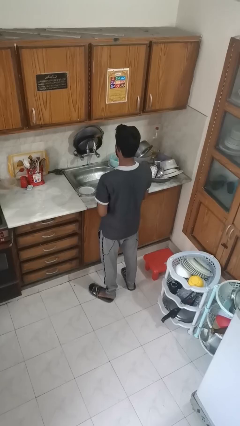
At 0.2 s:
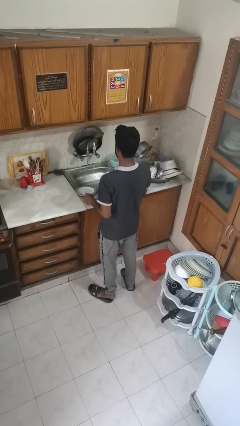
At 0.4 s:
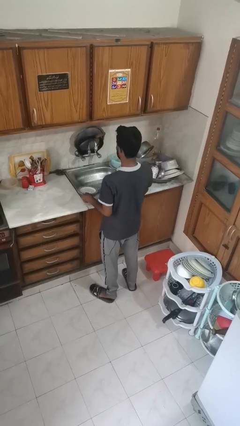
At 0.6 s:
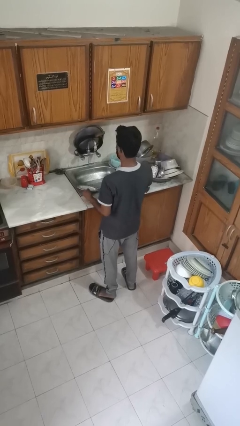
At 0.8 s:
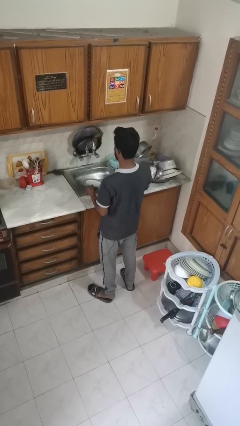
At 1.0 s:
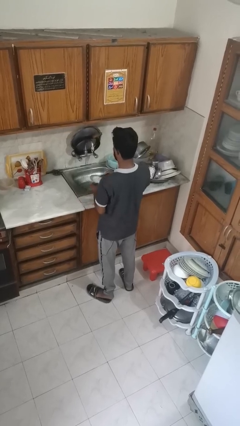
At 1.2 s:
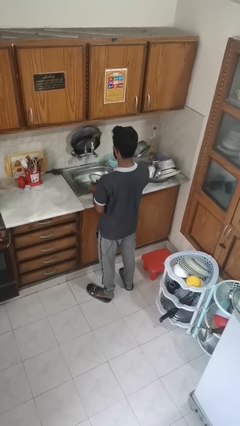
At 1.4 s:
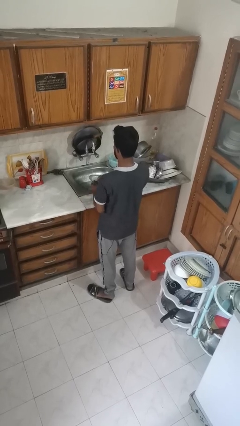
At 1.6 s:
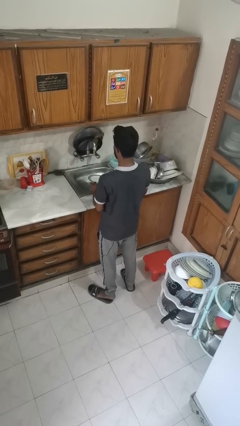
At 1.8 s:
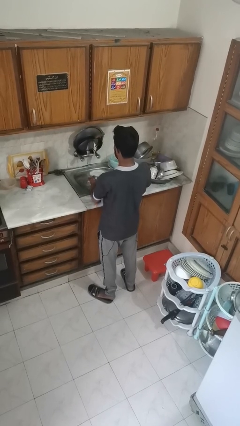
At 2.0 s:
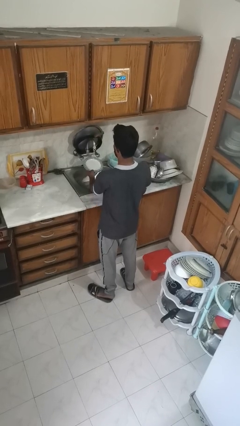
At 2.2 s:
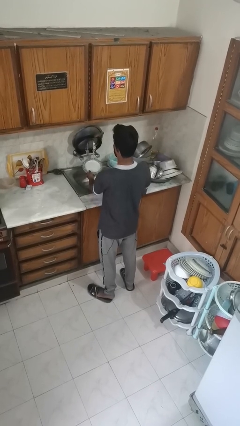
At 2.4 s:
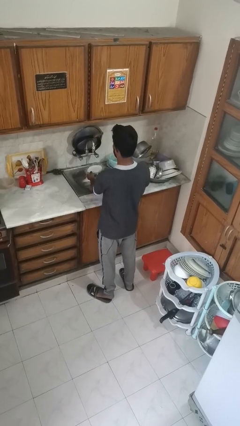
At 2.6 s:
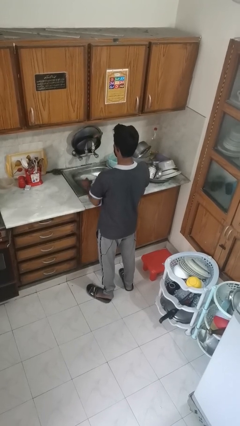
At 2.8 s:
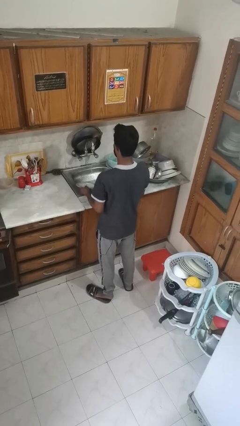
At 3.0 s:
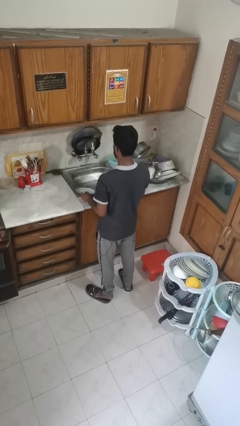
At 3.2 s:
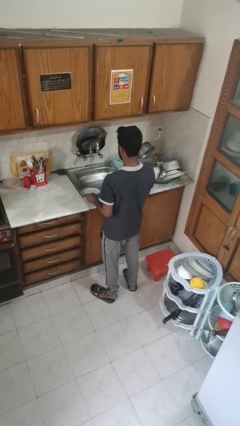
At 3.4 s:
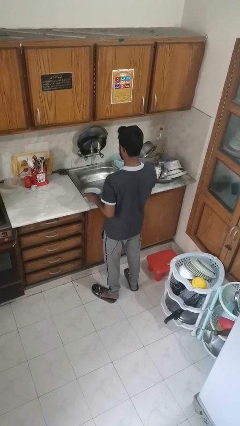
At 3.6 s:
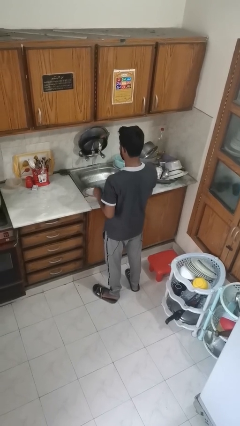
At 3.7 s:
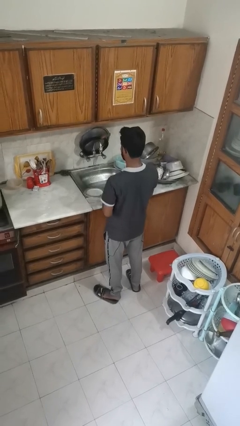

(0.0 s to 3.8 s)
person washes dish

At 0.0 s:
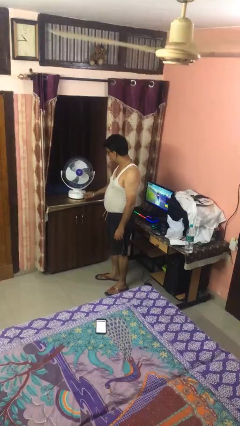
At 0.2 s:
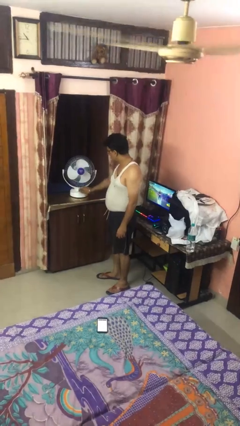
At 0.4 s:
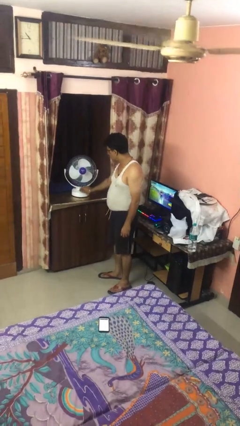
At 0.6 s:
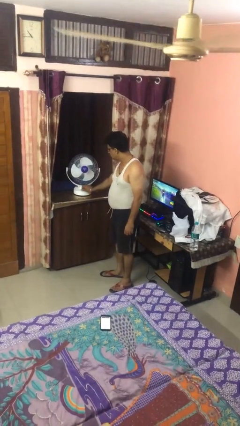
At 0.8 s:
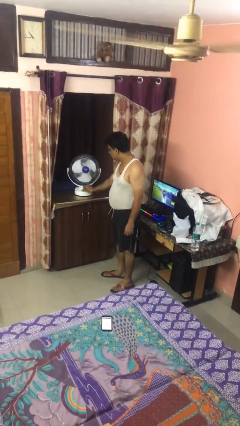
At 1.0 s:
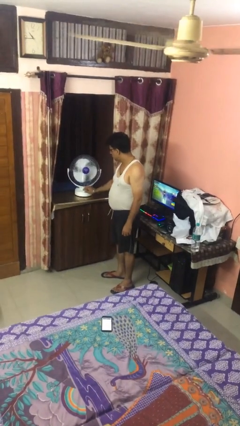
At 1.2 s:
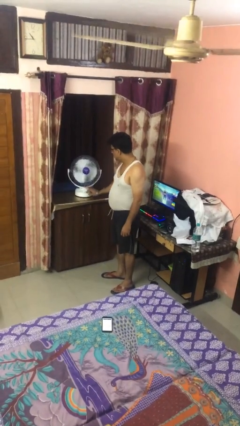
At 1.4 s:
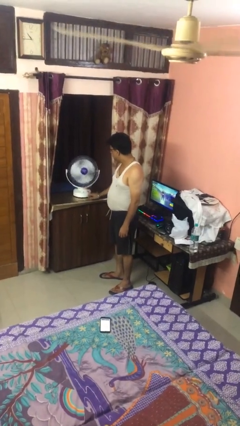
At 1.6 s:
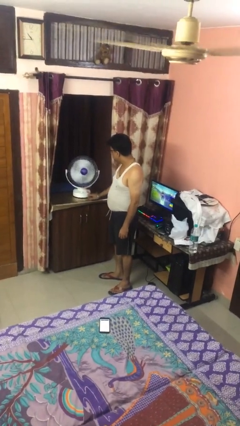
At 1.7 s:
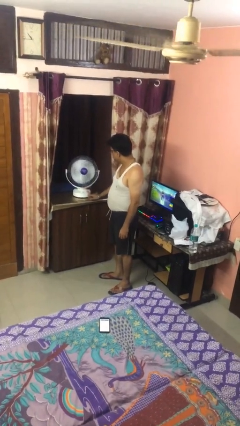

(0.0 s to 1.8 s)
person turns on fan

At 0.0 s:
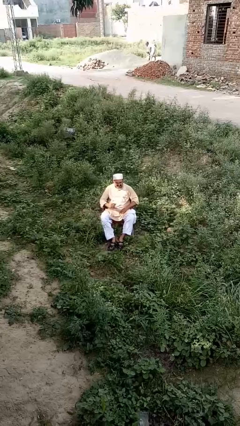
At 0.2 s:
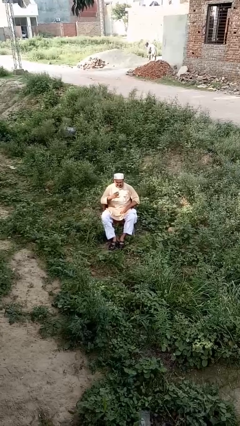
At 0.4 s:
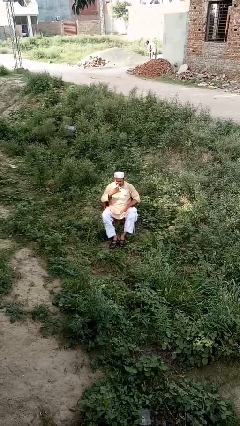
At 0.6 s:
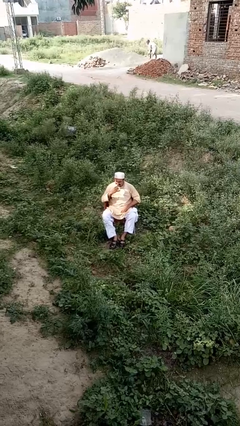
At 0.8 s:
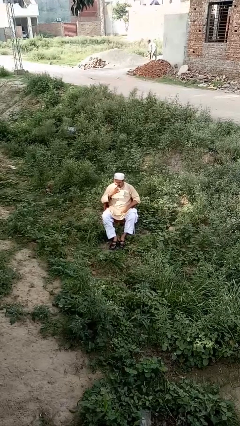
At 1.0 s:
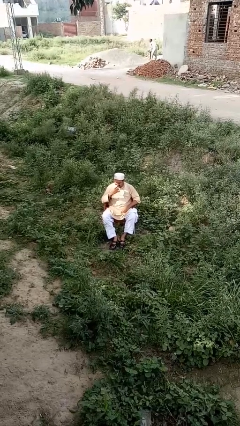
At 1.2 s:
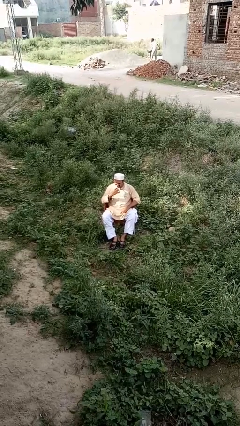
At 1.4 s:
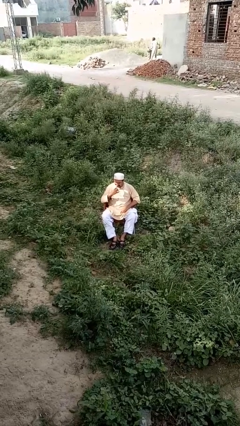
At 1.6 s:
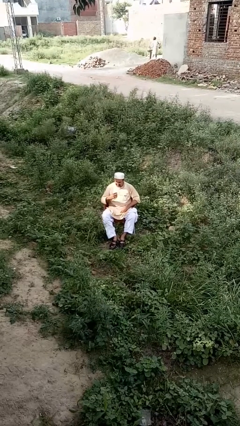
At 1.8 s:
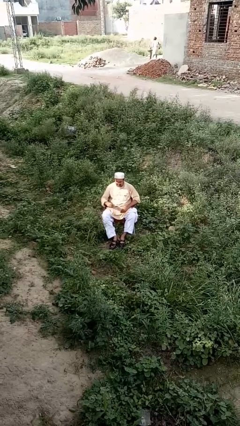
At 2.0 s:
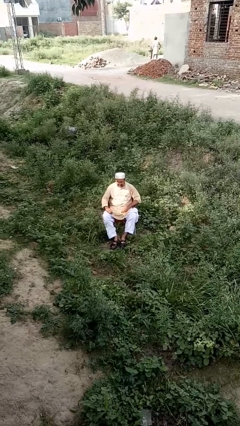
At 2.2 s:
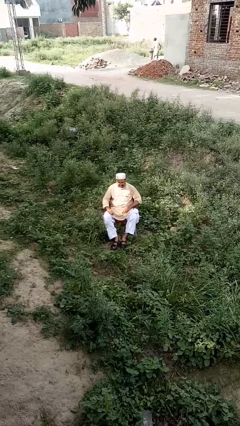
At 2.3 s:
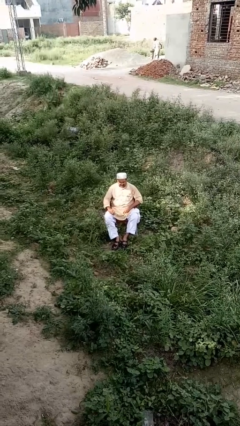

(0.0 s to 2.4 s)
person brushes teeth

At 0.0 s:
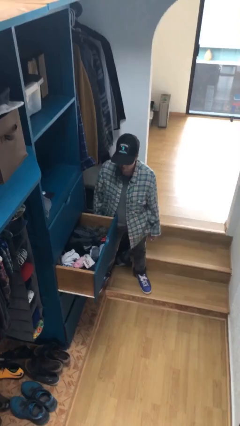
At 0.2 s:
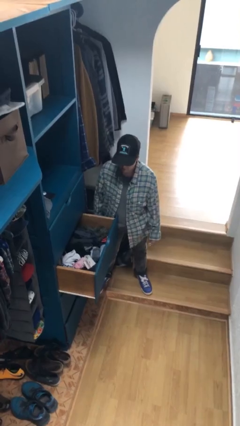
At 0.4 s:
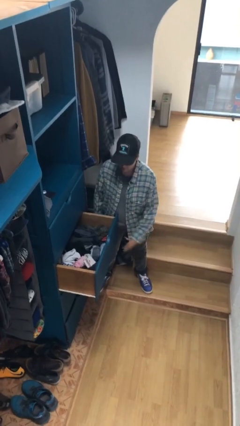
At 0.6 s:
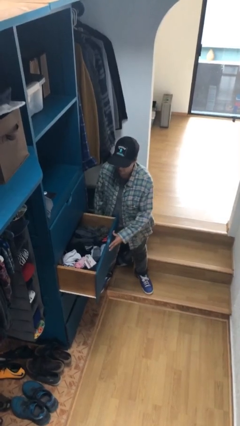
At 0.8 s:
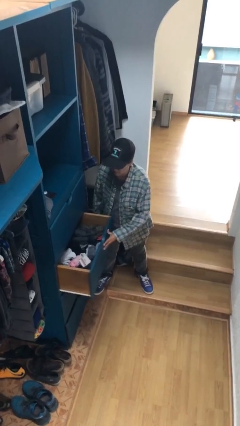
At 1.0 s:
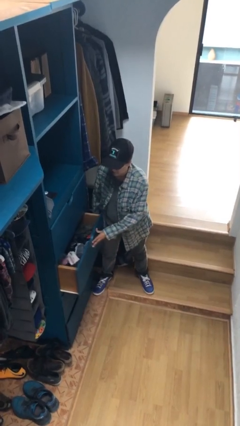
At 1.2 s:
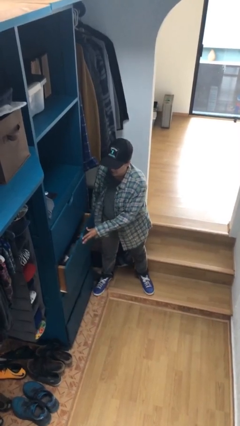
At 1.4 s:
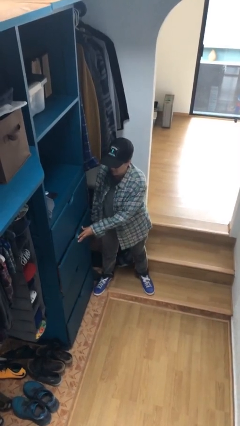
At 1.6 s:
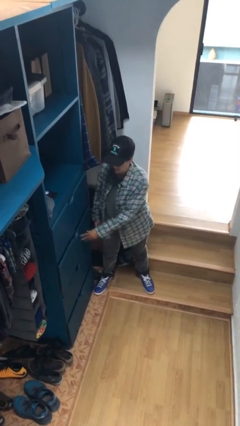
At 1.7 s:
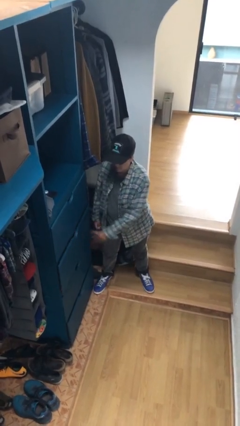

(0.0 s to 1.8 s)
person closes dresser drawer

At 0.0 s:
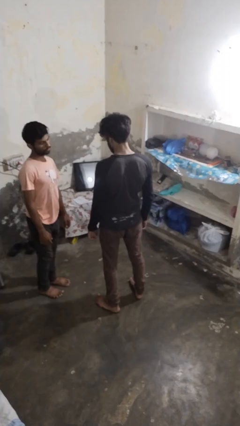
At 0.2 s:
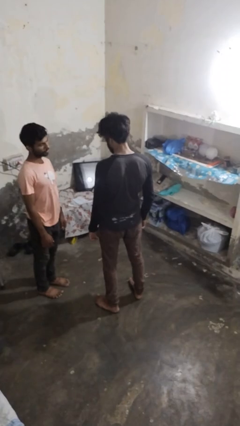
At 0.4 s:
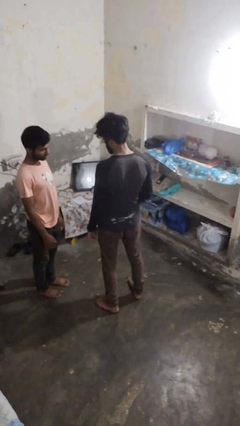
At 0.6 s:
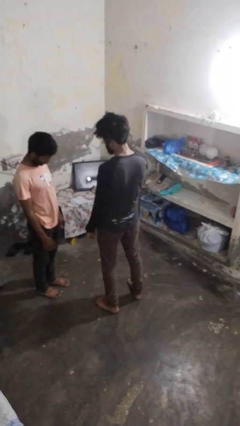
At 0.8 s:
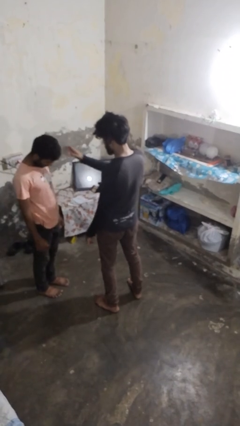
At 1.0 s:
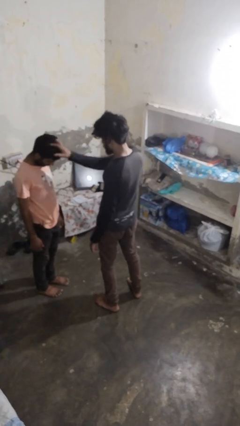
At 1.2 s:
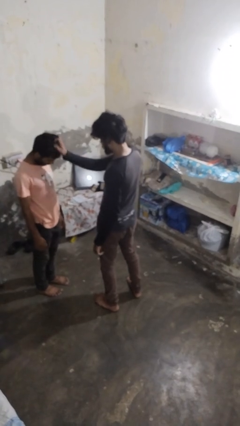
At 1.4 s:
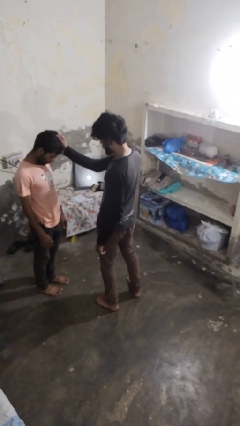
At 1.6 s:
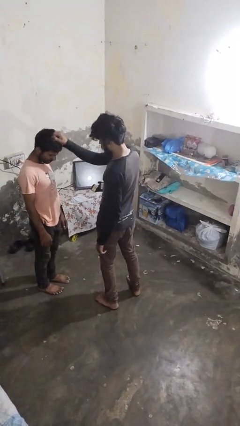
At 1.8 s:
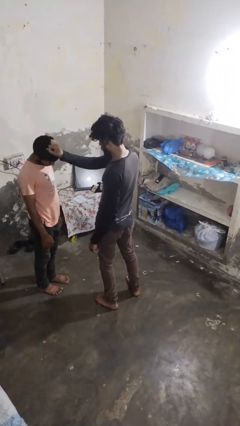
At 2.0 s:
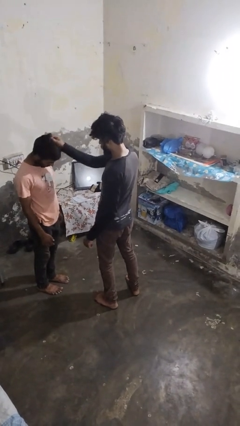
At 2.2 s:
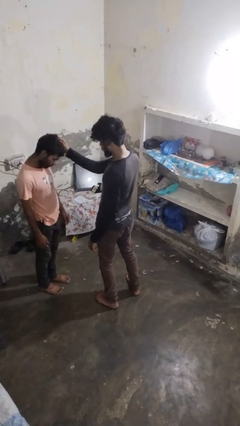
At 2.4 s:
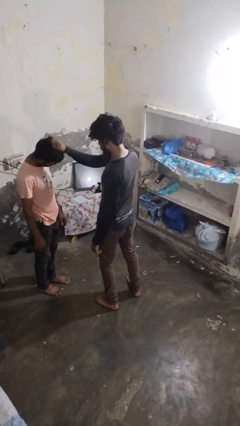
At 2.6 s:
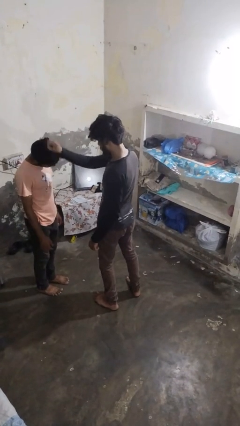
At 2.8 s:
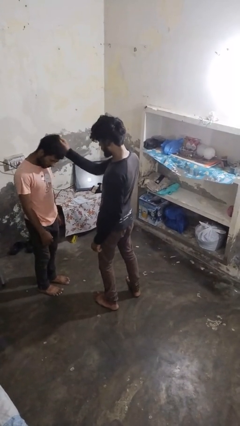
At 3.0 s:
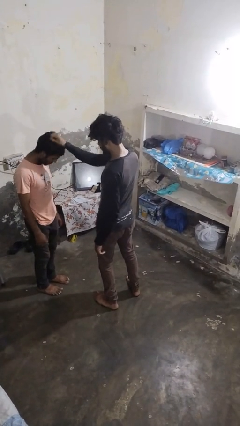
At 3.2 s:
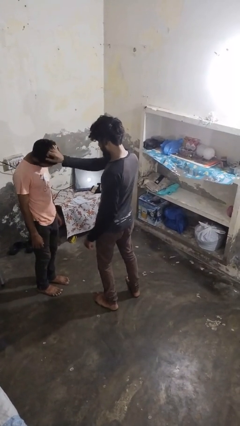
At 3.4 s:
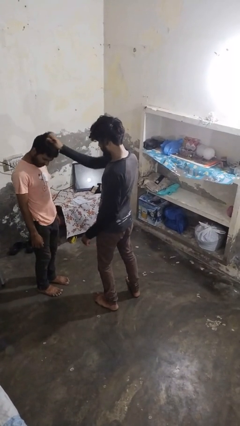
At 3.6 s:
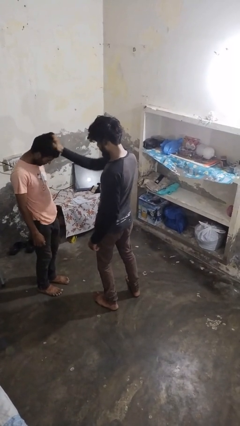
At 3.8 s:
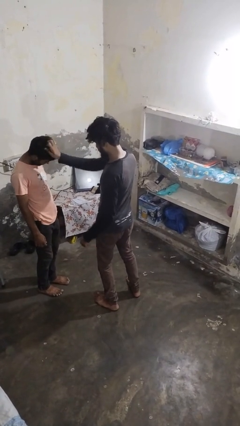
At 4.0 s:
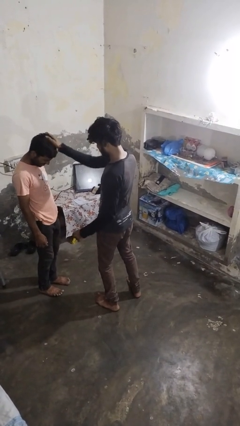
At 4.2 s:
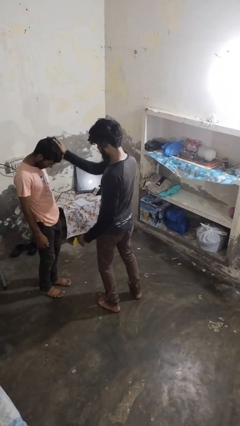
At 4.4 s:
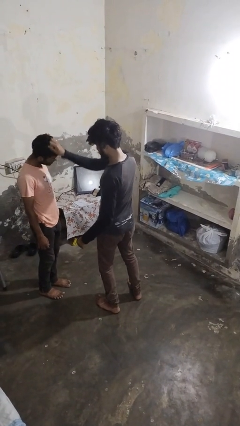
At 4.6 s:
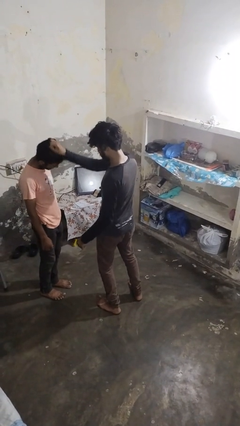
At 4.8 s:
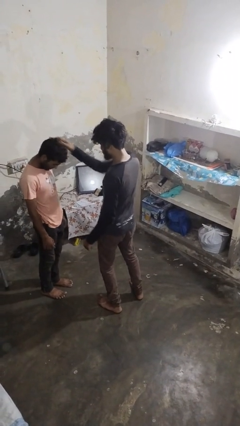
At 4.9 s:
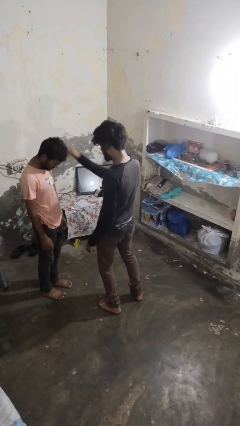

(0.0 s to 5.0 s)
person grabs person by hair

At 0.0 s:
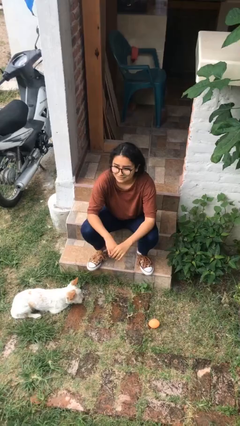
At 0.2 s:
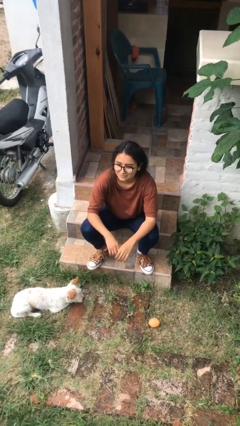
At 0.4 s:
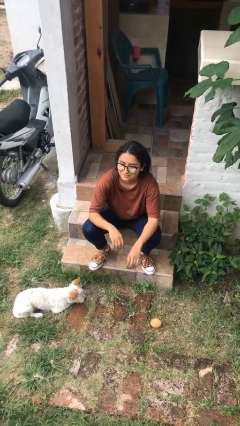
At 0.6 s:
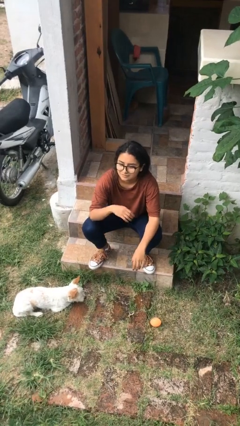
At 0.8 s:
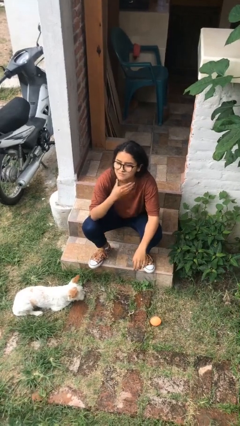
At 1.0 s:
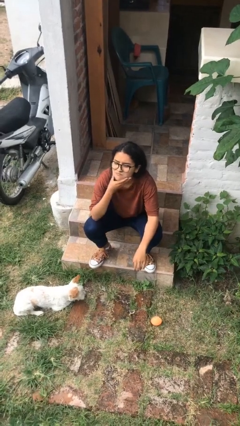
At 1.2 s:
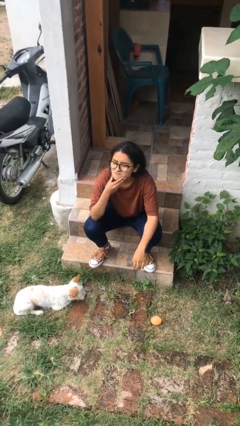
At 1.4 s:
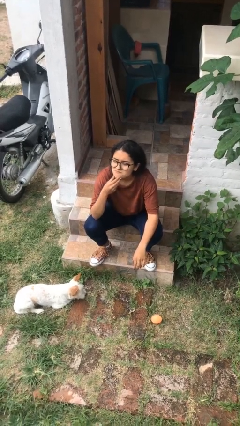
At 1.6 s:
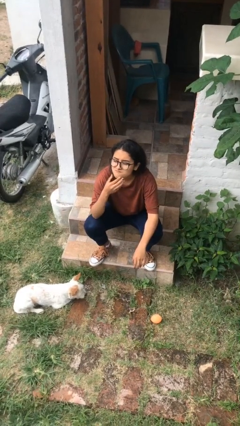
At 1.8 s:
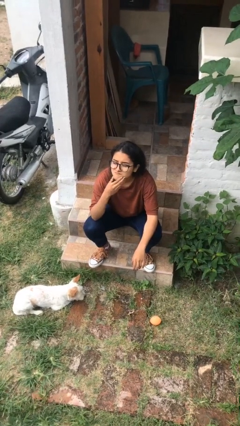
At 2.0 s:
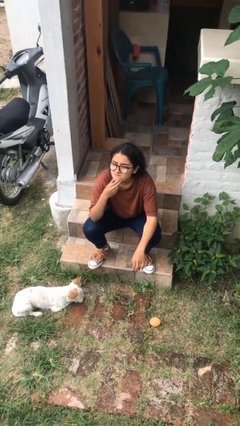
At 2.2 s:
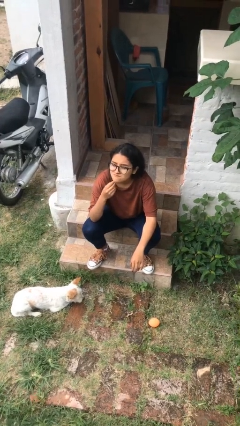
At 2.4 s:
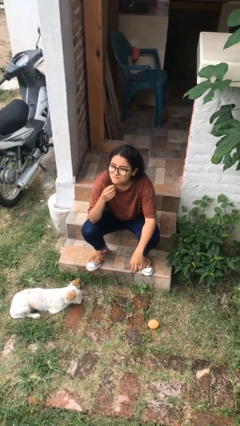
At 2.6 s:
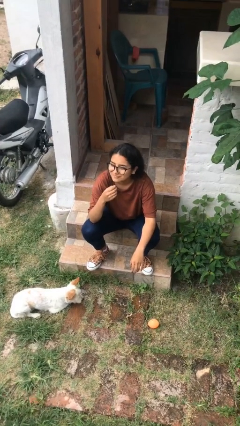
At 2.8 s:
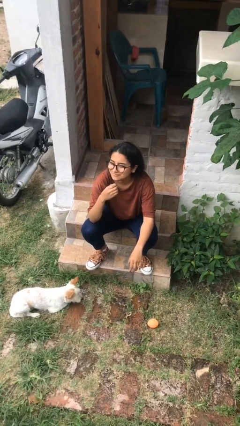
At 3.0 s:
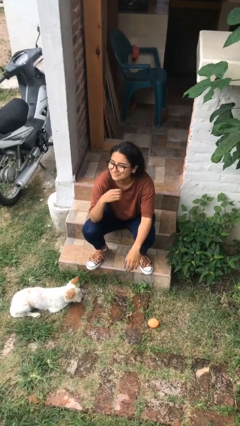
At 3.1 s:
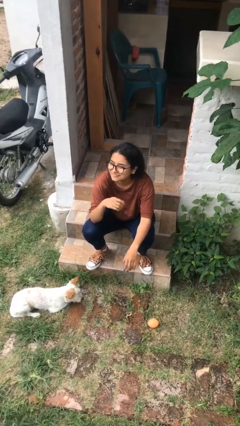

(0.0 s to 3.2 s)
person strokes chin
